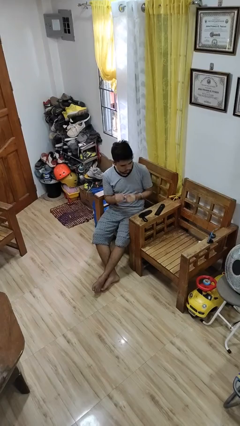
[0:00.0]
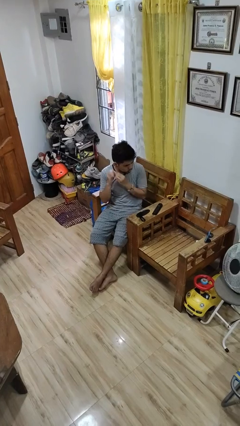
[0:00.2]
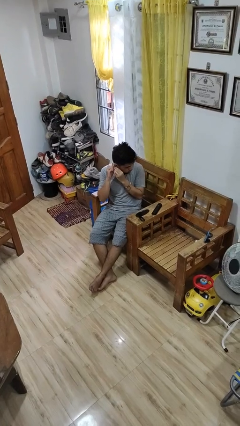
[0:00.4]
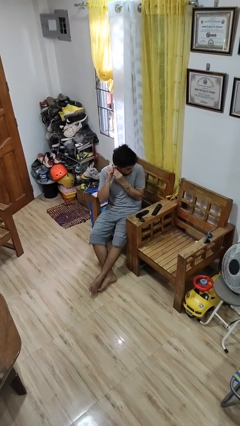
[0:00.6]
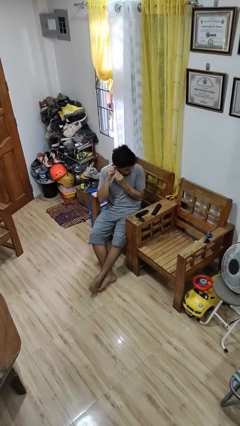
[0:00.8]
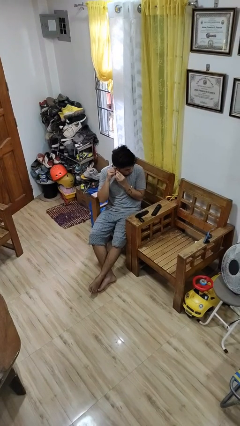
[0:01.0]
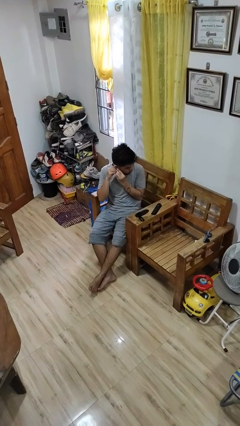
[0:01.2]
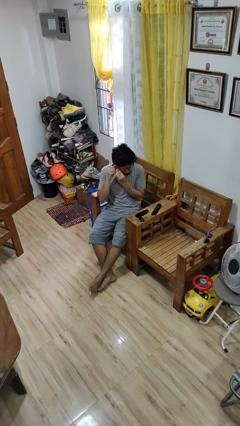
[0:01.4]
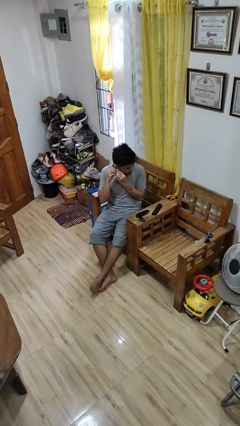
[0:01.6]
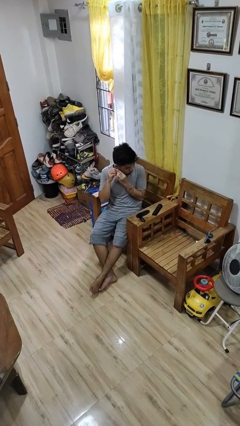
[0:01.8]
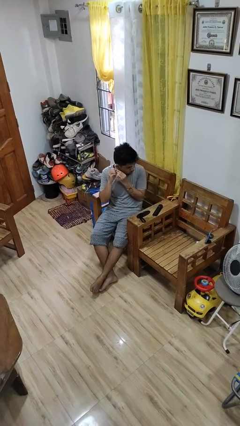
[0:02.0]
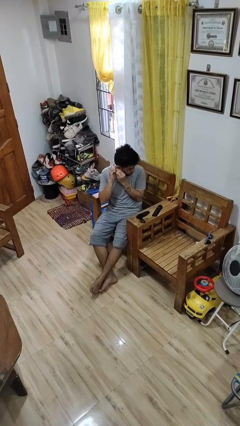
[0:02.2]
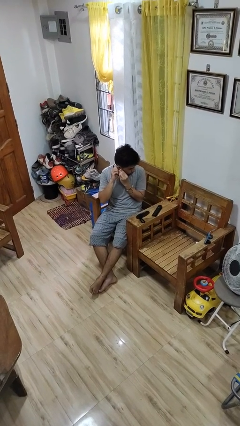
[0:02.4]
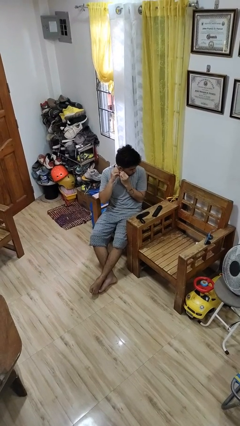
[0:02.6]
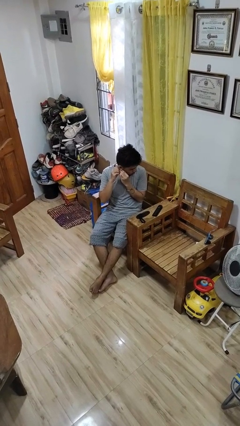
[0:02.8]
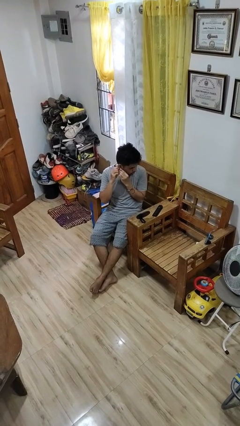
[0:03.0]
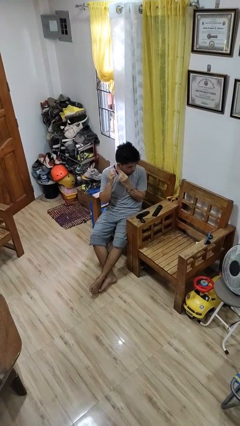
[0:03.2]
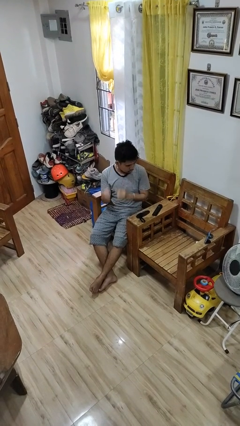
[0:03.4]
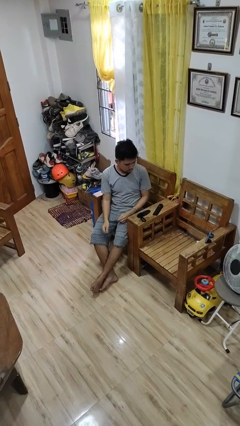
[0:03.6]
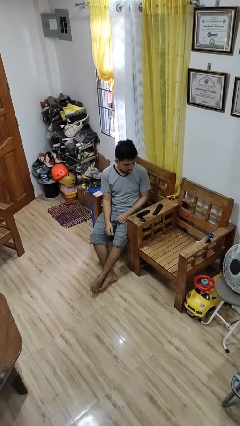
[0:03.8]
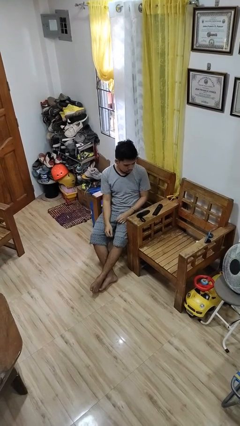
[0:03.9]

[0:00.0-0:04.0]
person puts on earrings

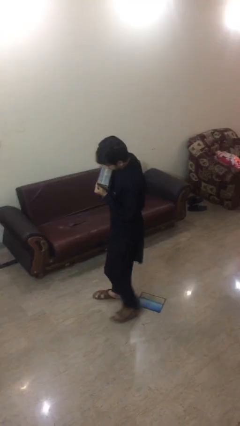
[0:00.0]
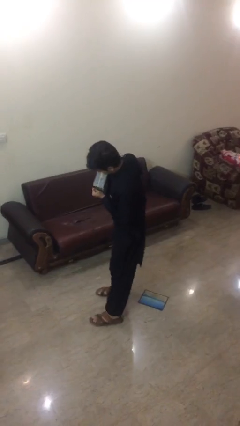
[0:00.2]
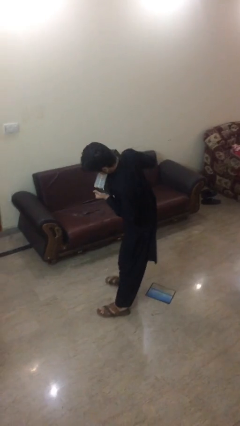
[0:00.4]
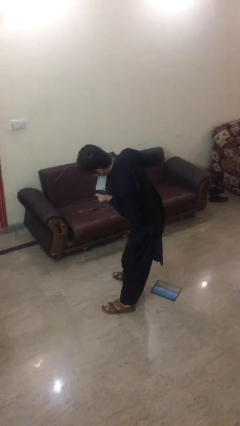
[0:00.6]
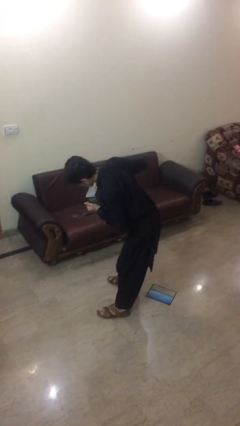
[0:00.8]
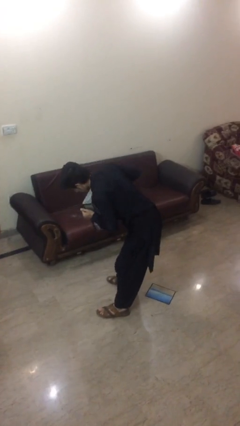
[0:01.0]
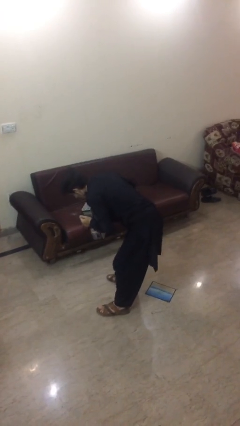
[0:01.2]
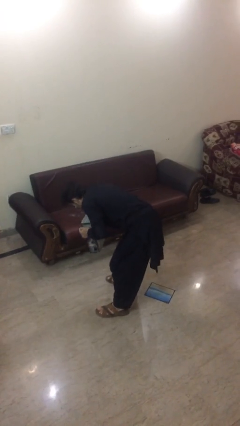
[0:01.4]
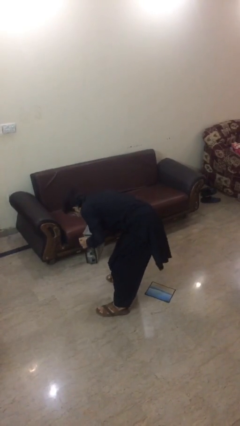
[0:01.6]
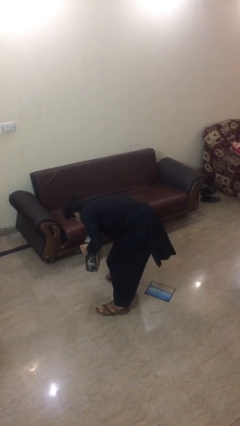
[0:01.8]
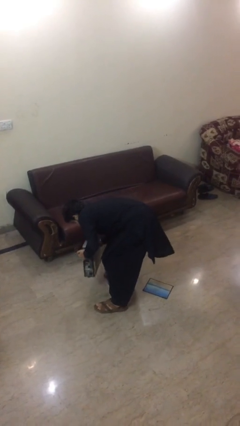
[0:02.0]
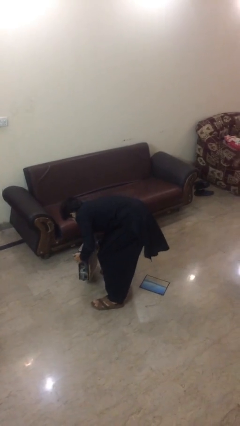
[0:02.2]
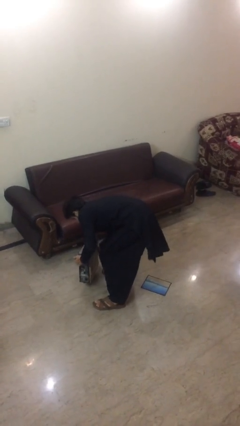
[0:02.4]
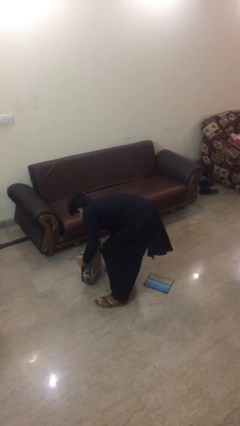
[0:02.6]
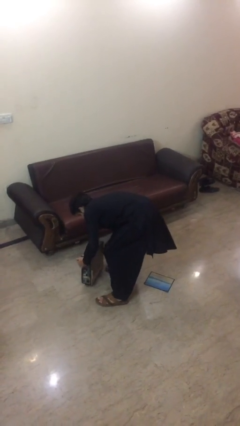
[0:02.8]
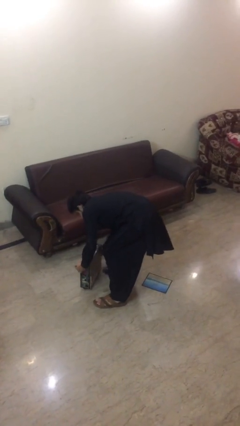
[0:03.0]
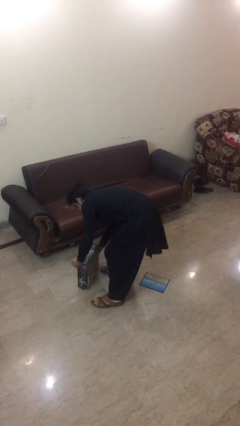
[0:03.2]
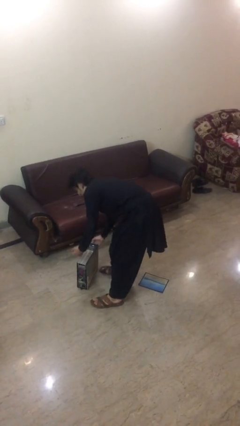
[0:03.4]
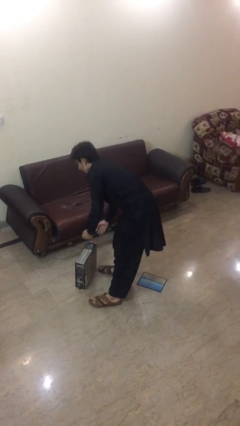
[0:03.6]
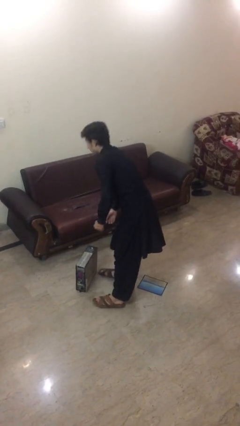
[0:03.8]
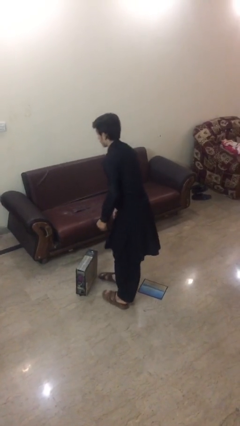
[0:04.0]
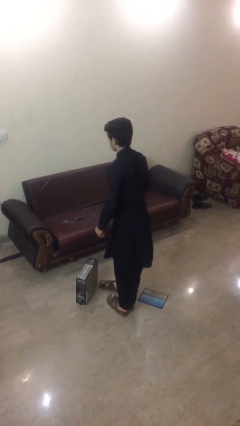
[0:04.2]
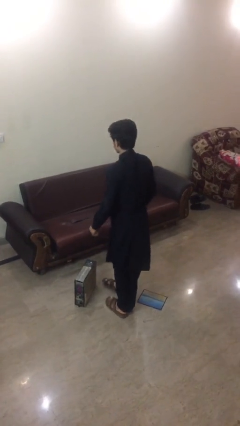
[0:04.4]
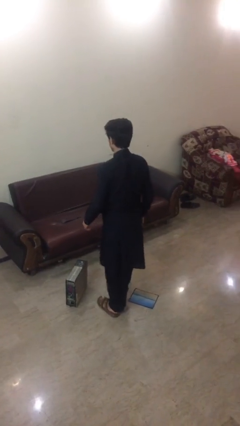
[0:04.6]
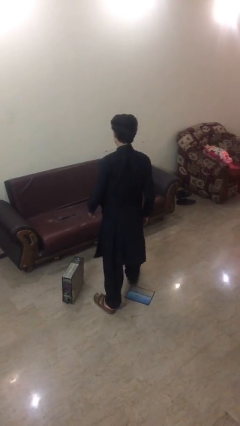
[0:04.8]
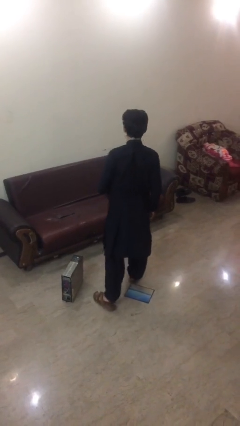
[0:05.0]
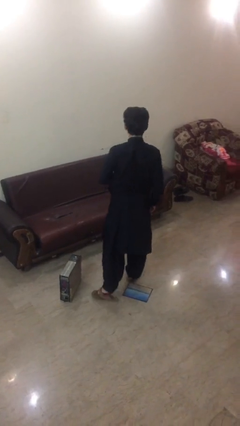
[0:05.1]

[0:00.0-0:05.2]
person puts down object on floor

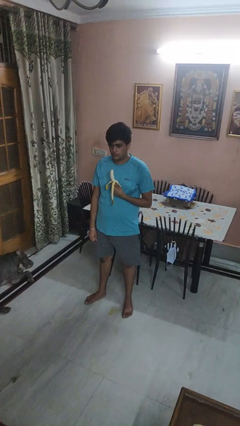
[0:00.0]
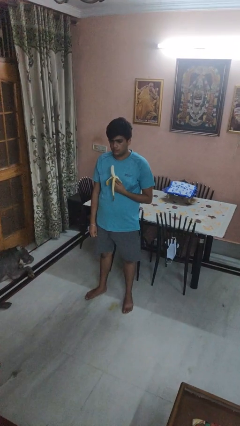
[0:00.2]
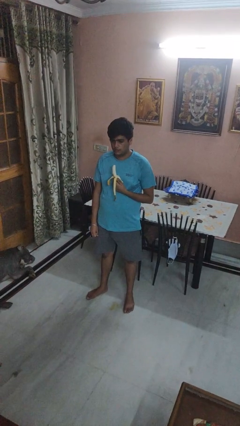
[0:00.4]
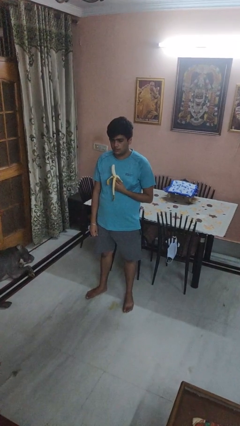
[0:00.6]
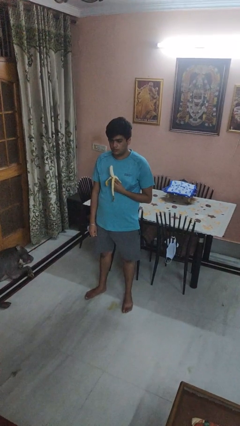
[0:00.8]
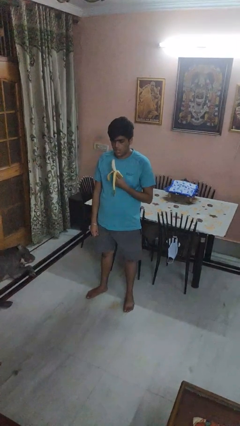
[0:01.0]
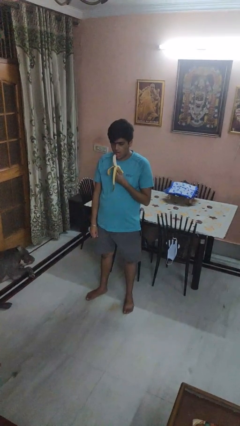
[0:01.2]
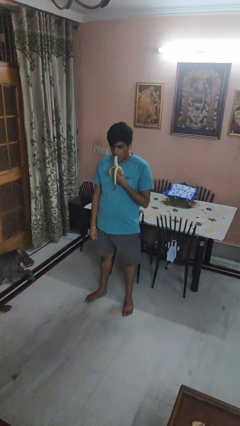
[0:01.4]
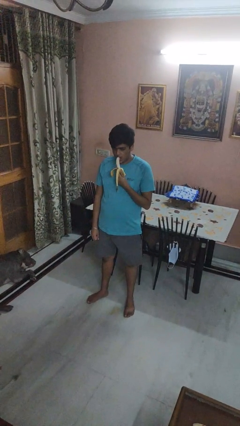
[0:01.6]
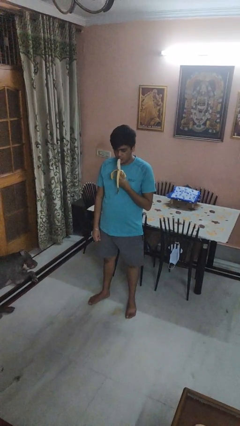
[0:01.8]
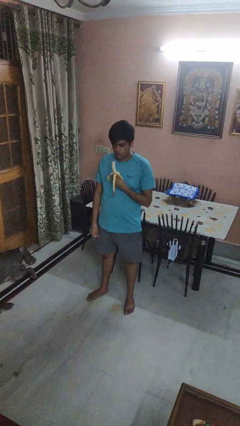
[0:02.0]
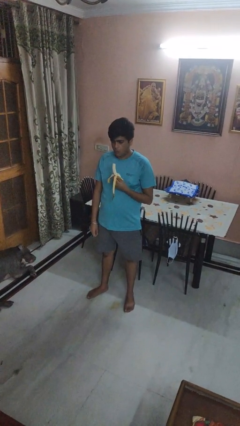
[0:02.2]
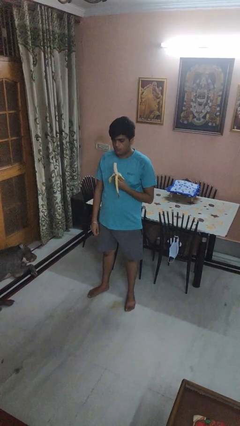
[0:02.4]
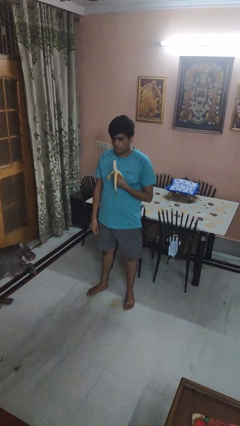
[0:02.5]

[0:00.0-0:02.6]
person eats banana

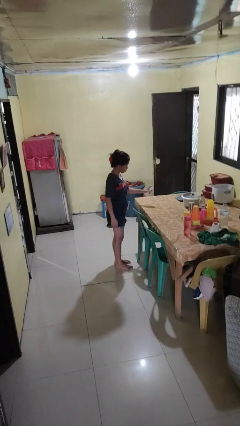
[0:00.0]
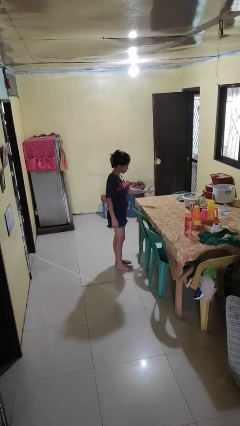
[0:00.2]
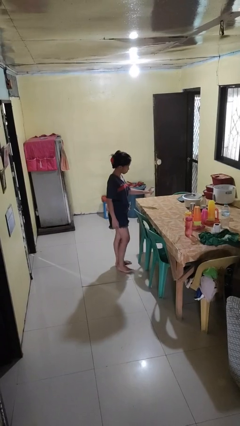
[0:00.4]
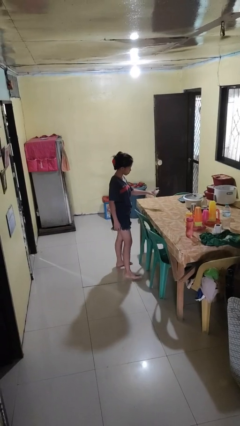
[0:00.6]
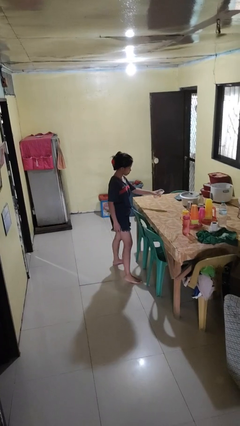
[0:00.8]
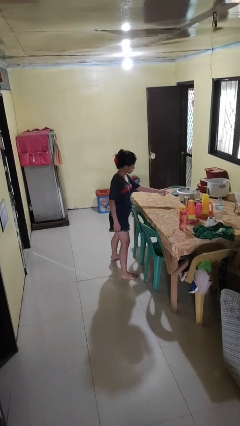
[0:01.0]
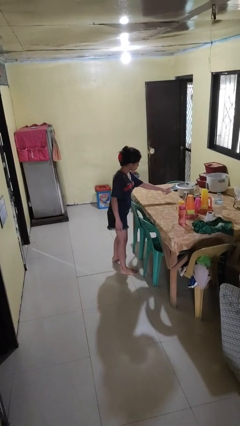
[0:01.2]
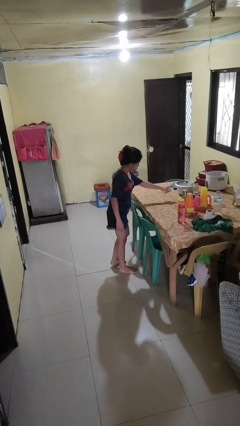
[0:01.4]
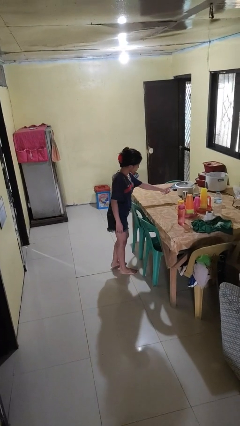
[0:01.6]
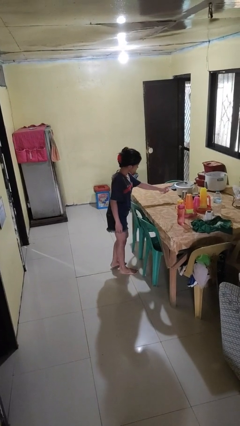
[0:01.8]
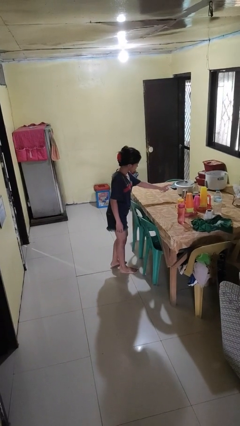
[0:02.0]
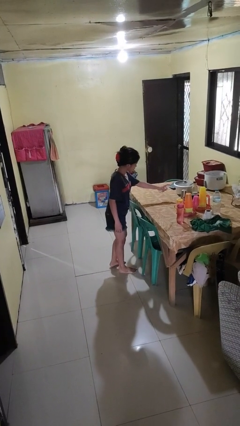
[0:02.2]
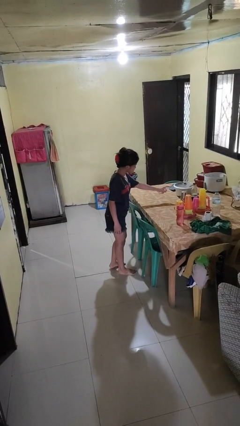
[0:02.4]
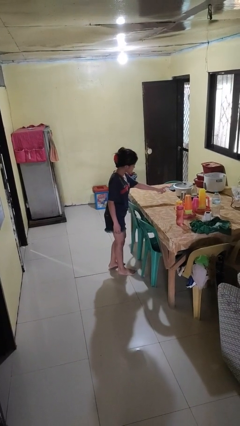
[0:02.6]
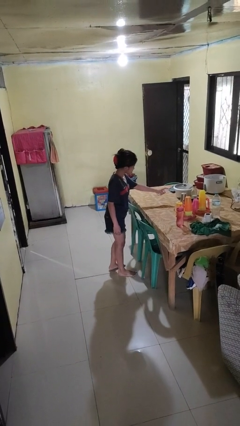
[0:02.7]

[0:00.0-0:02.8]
person sprays from bottle

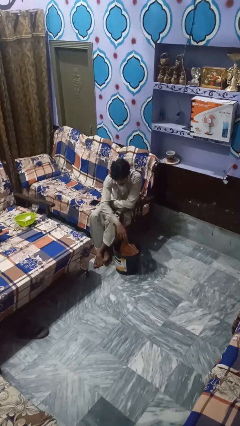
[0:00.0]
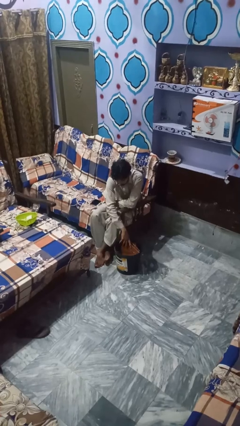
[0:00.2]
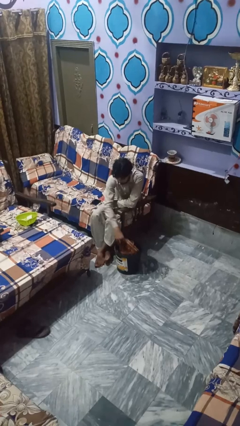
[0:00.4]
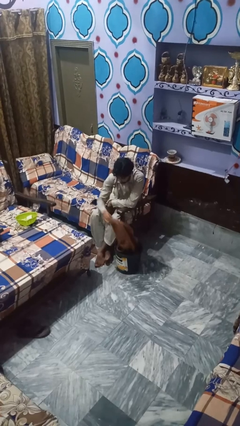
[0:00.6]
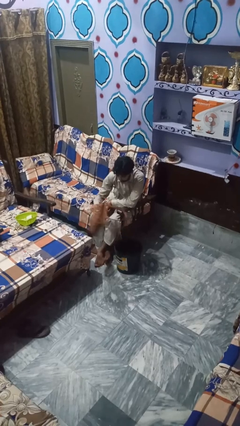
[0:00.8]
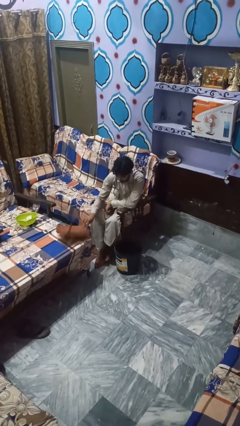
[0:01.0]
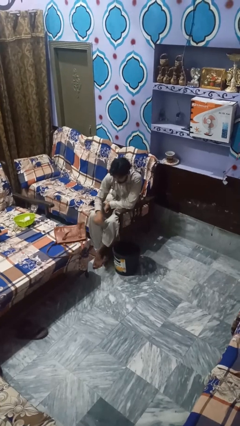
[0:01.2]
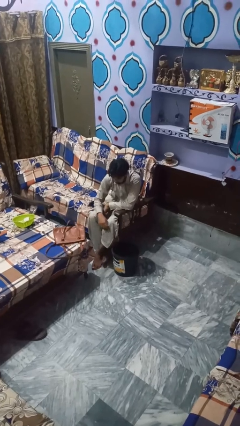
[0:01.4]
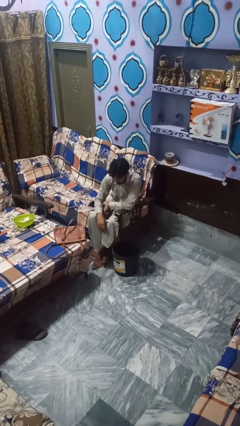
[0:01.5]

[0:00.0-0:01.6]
person takes object from basket

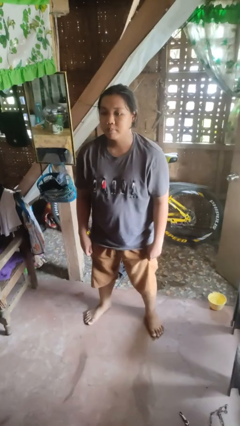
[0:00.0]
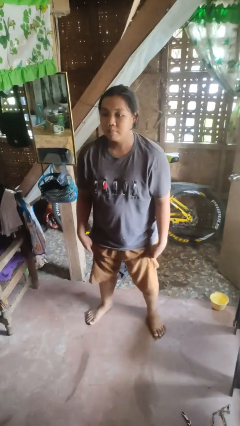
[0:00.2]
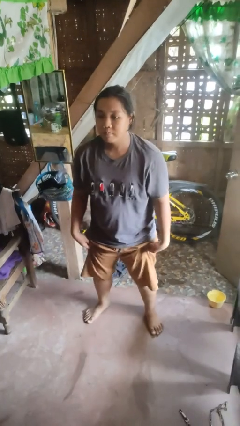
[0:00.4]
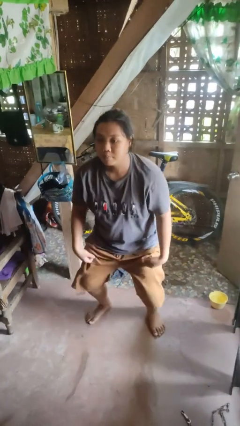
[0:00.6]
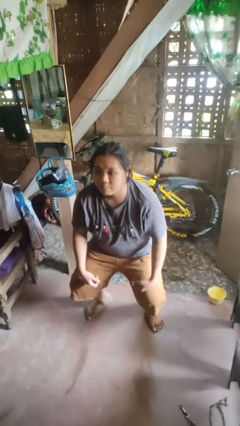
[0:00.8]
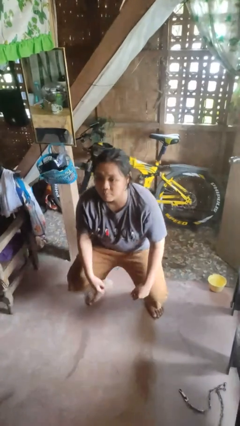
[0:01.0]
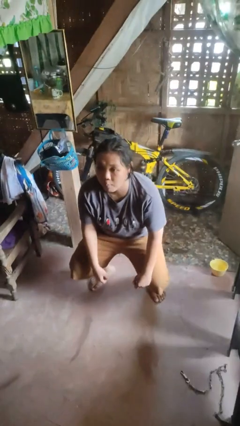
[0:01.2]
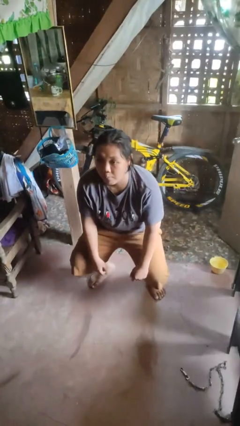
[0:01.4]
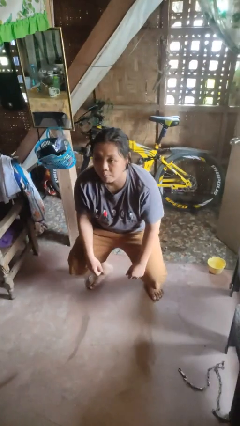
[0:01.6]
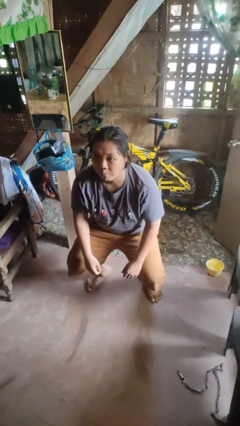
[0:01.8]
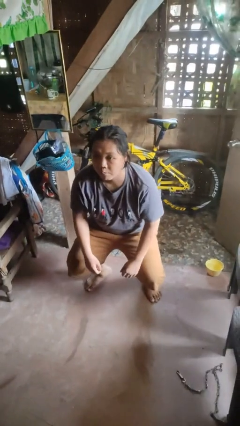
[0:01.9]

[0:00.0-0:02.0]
person squats
